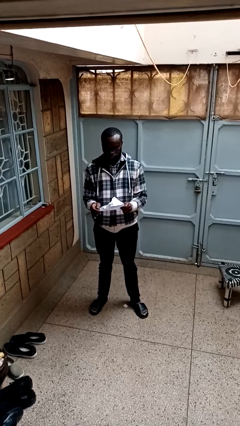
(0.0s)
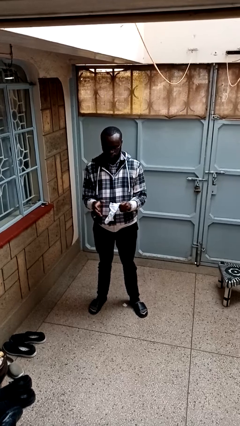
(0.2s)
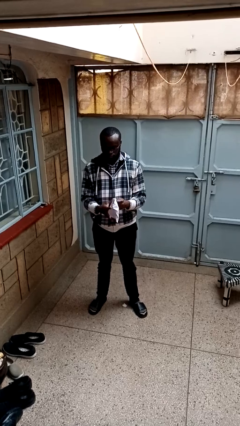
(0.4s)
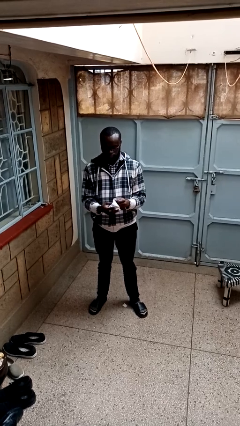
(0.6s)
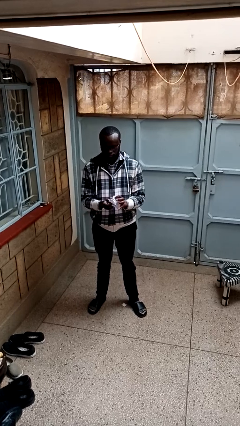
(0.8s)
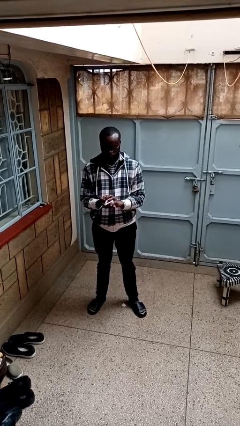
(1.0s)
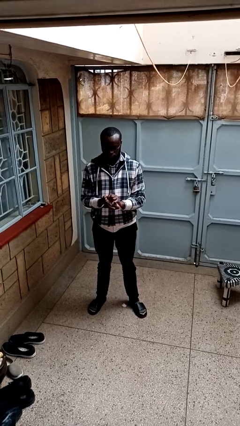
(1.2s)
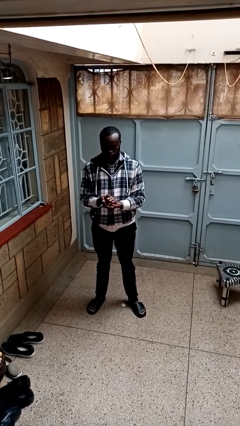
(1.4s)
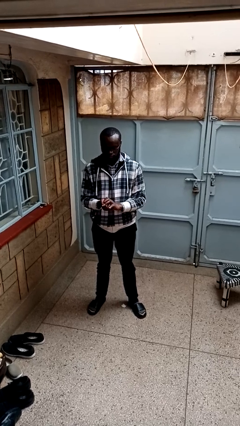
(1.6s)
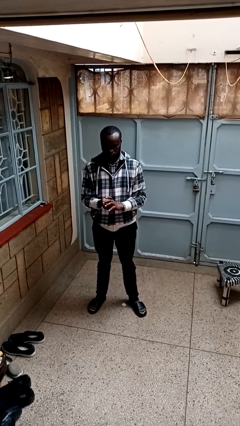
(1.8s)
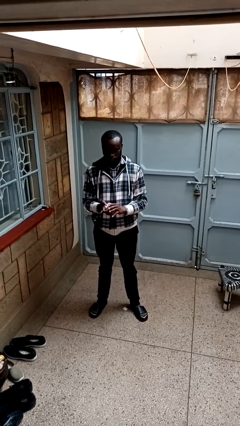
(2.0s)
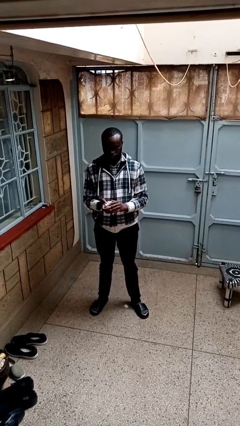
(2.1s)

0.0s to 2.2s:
person crumples paper

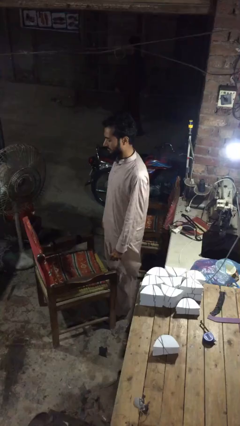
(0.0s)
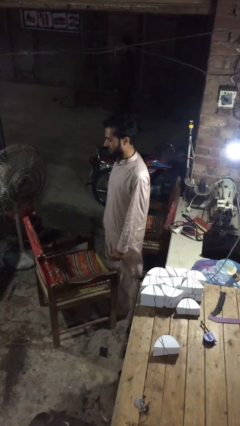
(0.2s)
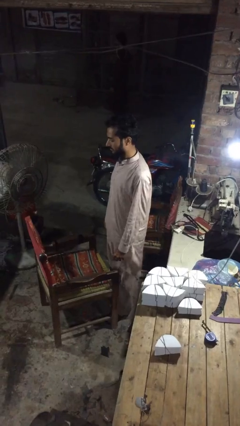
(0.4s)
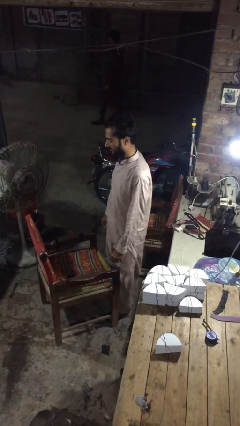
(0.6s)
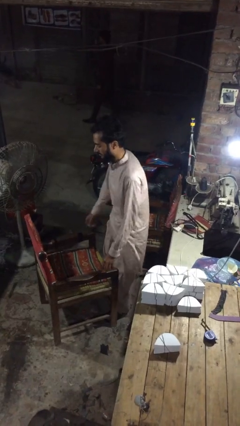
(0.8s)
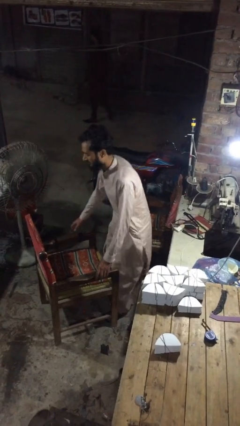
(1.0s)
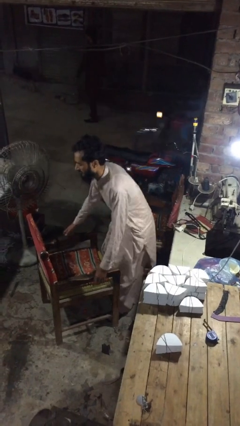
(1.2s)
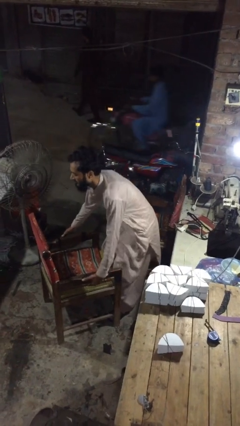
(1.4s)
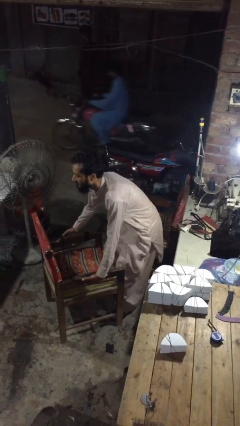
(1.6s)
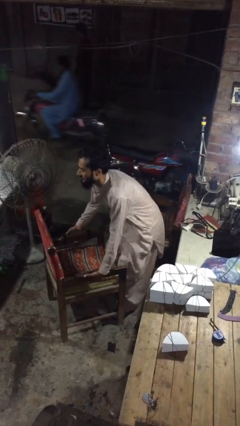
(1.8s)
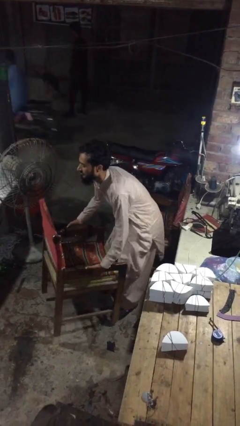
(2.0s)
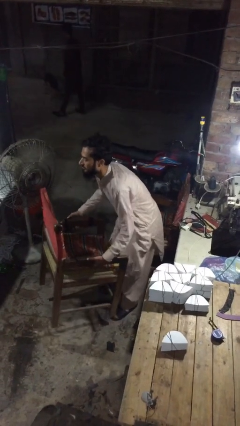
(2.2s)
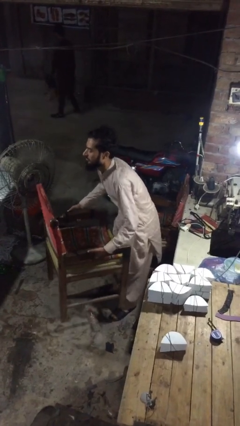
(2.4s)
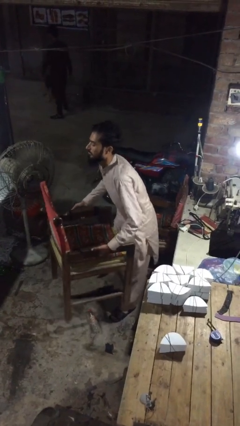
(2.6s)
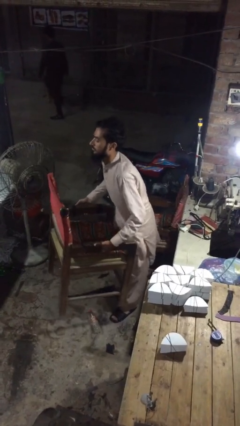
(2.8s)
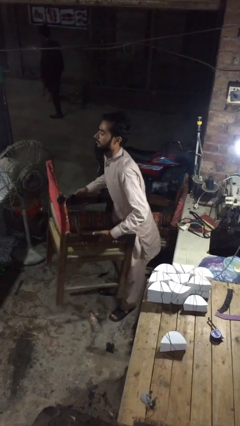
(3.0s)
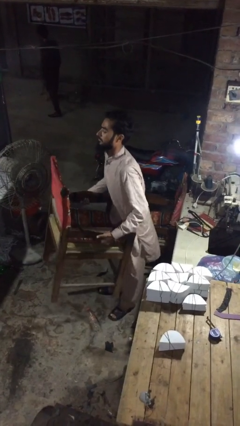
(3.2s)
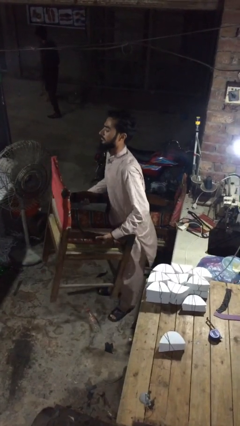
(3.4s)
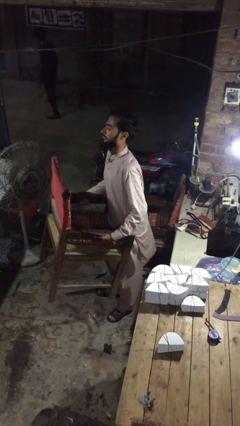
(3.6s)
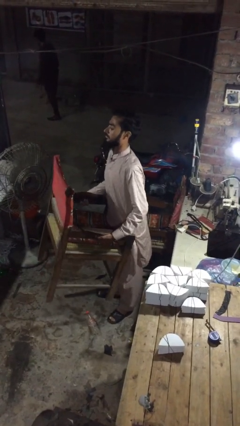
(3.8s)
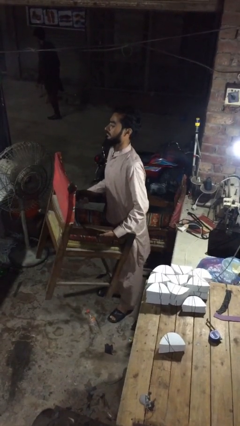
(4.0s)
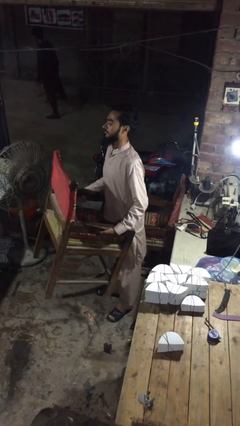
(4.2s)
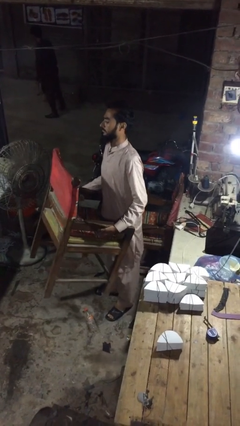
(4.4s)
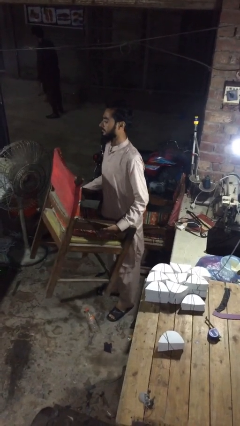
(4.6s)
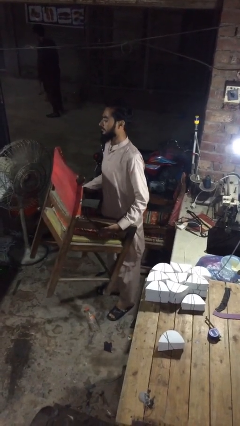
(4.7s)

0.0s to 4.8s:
person picks up object from floor

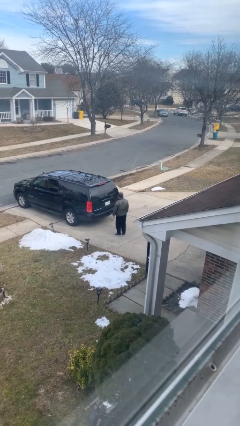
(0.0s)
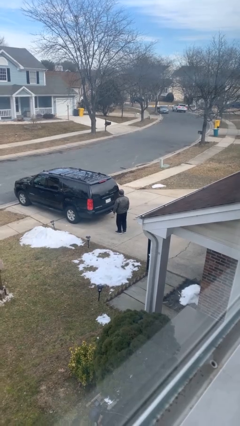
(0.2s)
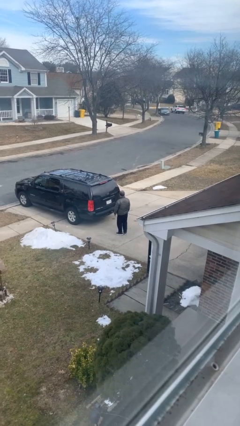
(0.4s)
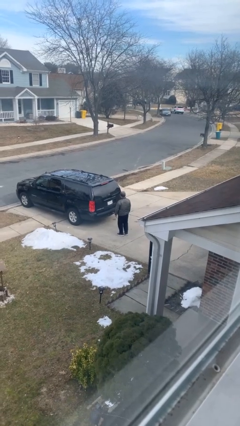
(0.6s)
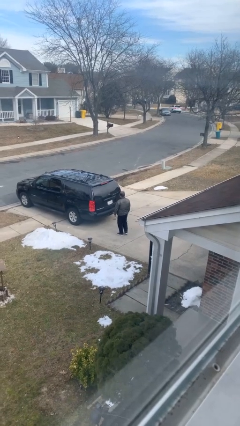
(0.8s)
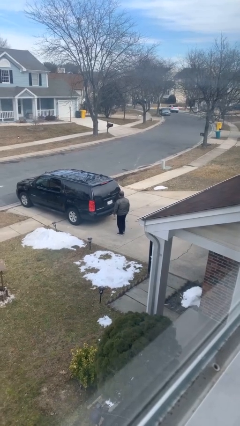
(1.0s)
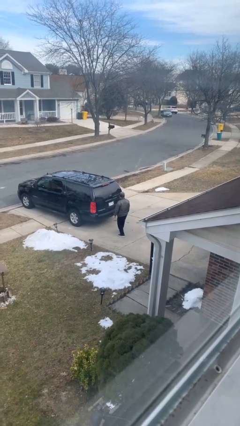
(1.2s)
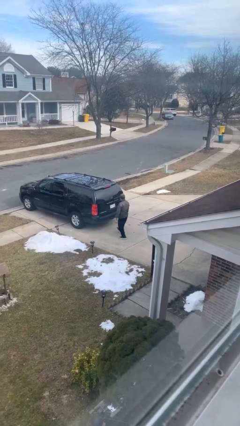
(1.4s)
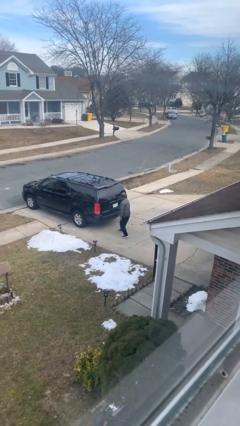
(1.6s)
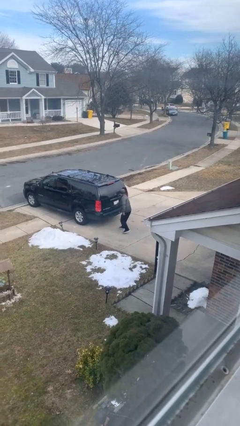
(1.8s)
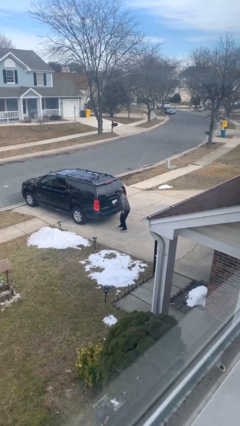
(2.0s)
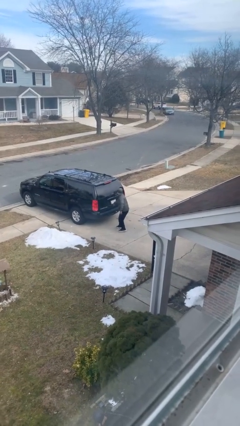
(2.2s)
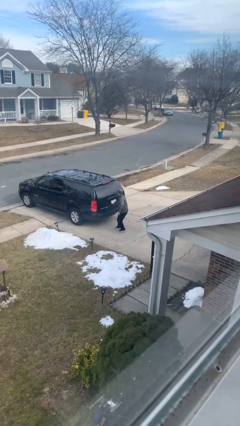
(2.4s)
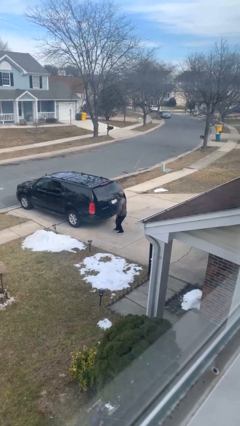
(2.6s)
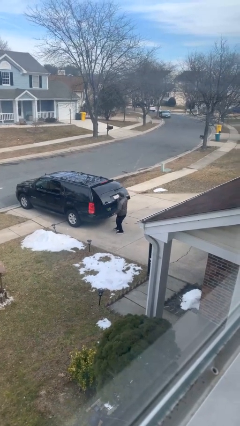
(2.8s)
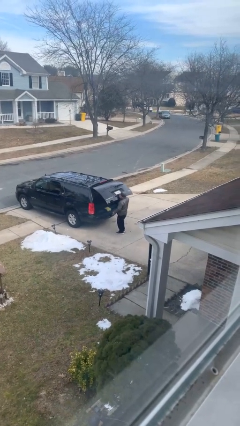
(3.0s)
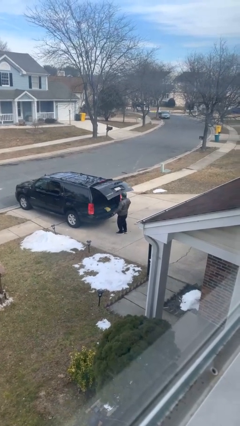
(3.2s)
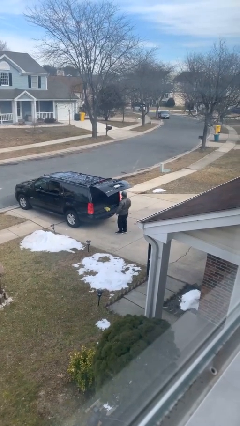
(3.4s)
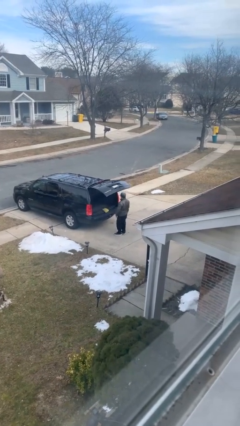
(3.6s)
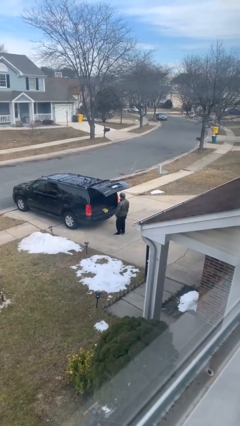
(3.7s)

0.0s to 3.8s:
person opens car trunk

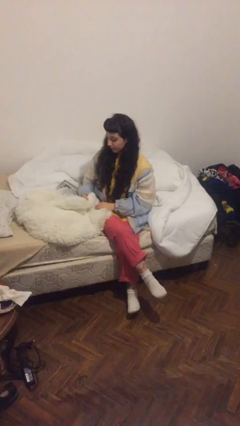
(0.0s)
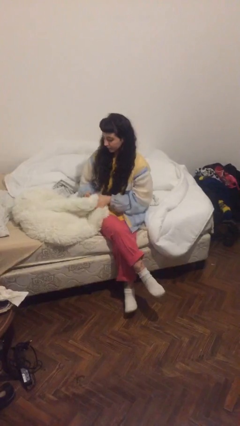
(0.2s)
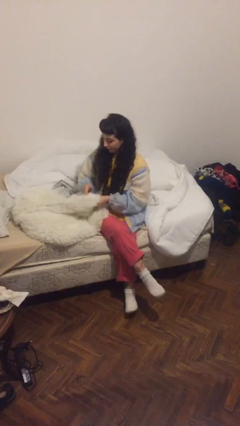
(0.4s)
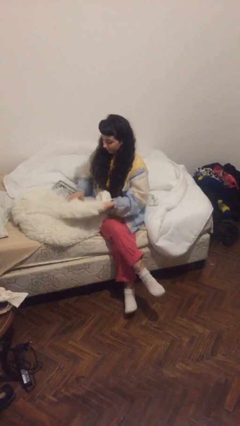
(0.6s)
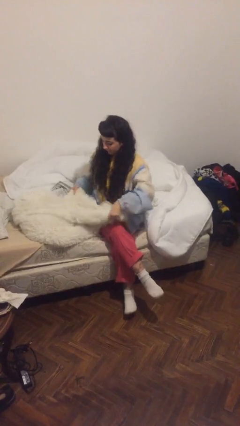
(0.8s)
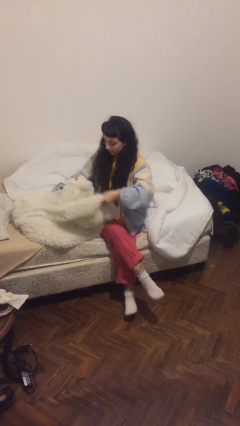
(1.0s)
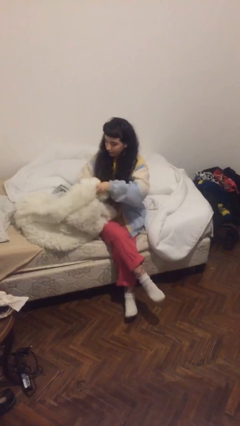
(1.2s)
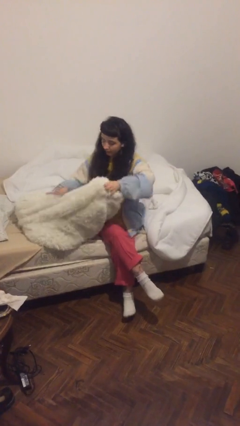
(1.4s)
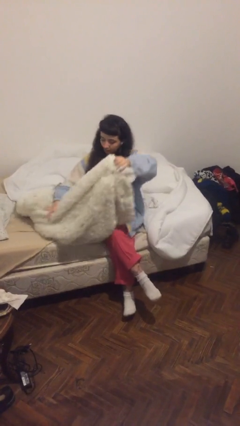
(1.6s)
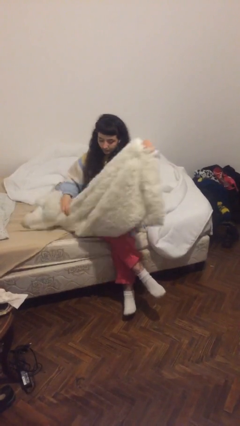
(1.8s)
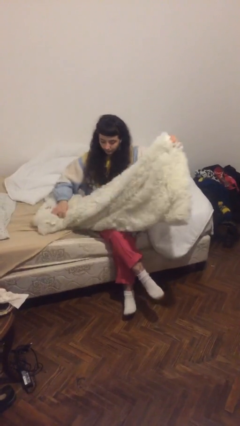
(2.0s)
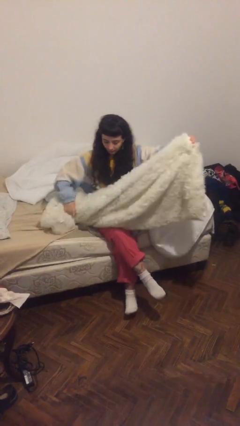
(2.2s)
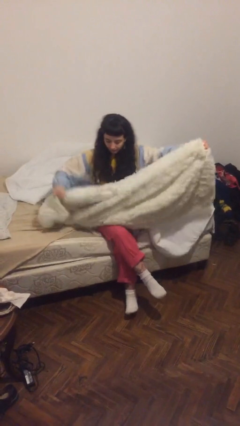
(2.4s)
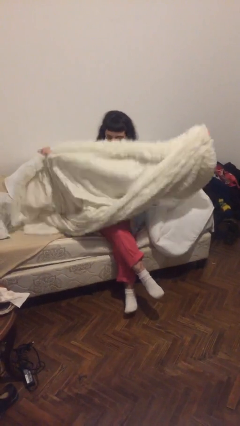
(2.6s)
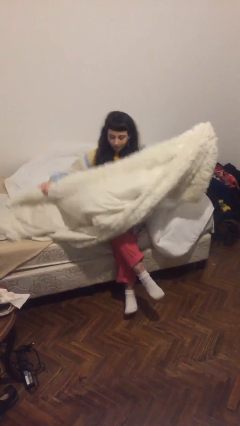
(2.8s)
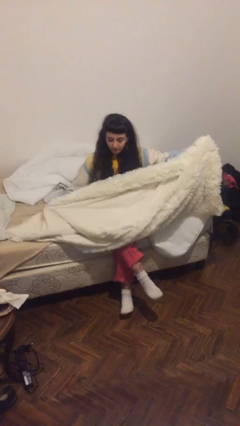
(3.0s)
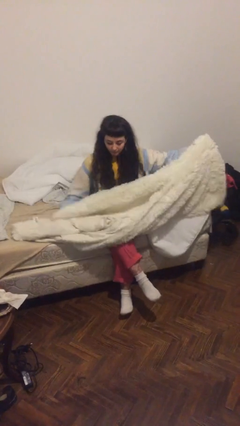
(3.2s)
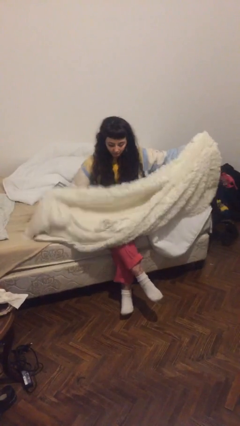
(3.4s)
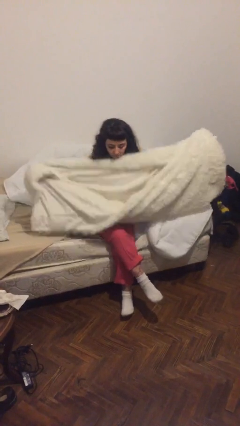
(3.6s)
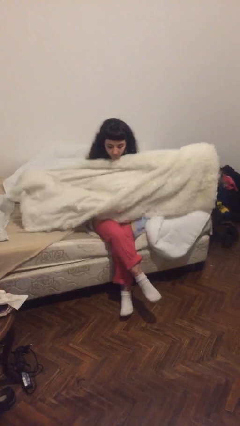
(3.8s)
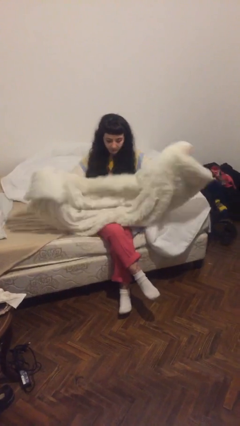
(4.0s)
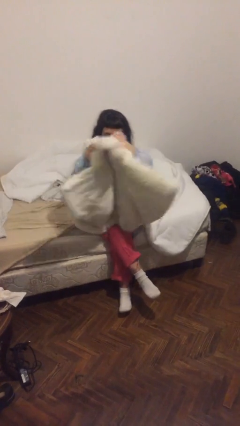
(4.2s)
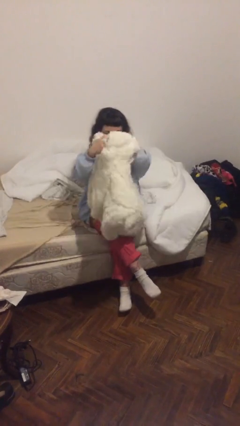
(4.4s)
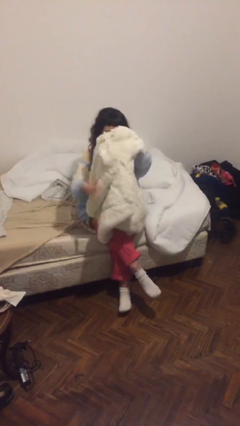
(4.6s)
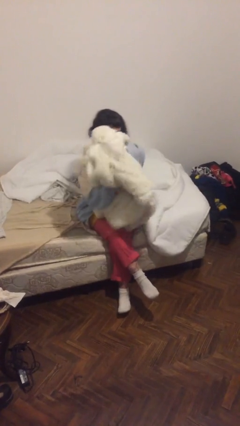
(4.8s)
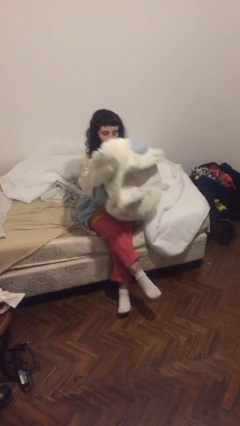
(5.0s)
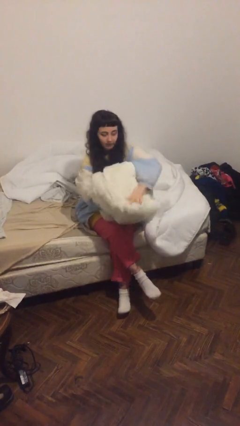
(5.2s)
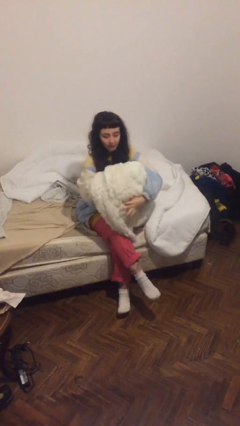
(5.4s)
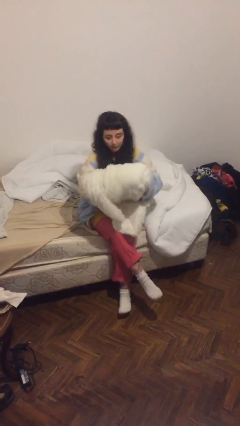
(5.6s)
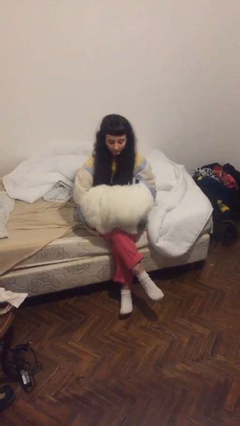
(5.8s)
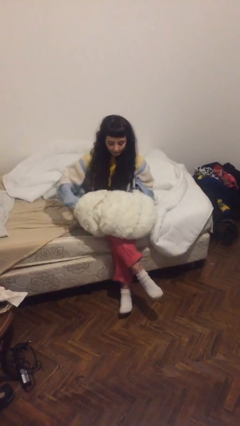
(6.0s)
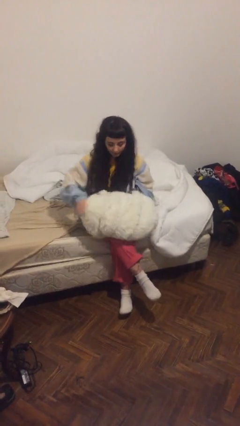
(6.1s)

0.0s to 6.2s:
person folds blanket

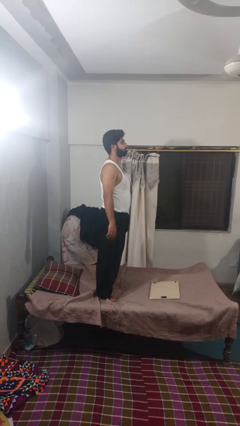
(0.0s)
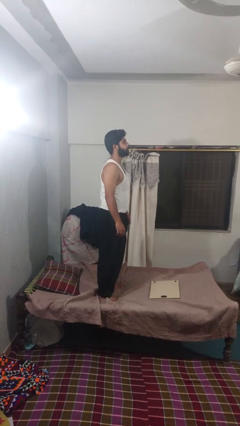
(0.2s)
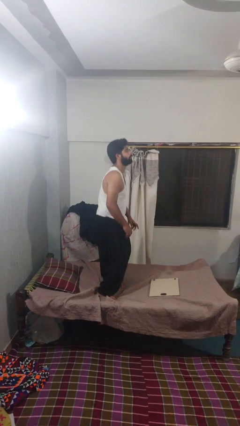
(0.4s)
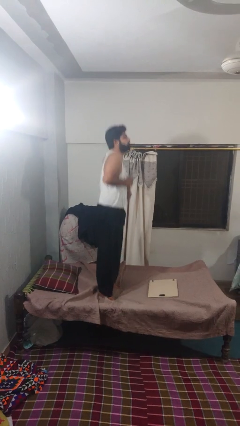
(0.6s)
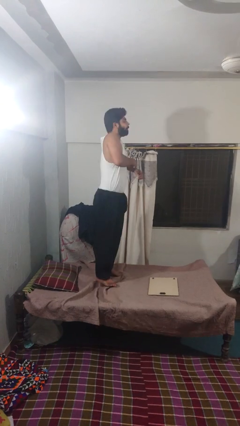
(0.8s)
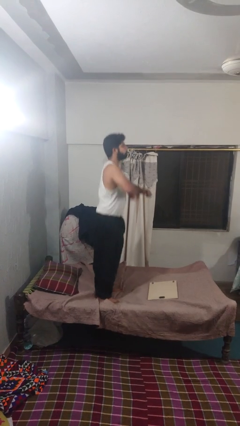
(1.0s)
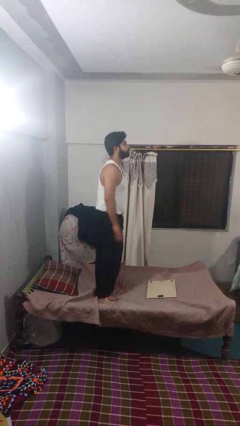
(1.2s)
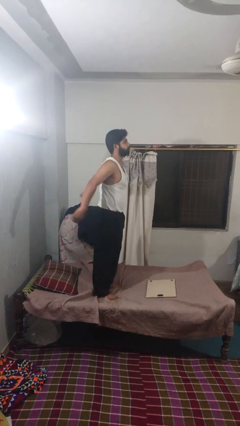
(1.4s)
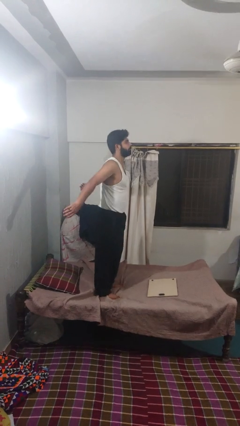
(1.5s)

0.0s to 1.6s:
person jumps on bed
